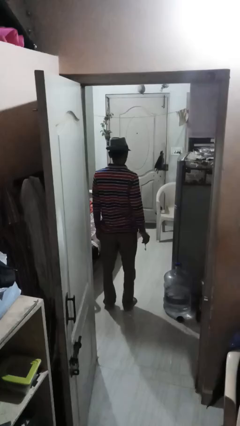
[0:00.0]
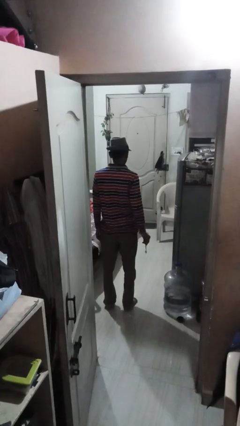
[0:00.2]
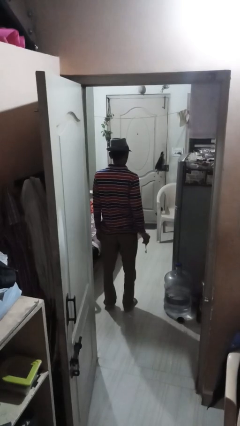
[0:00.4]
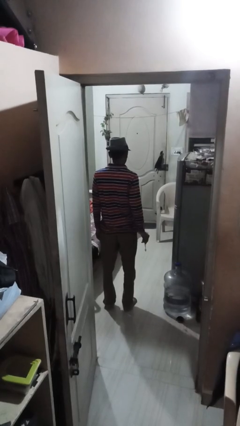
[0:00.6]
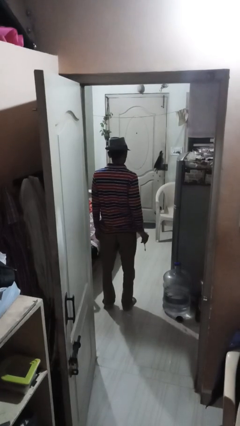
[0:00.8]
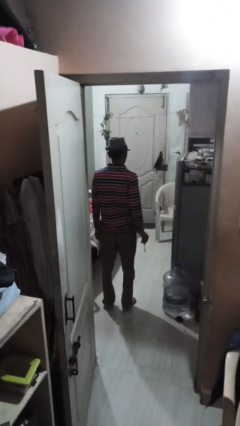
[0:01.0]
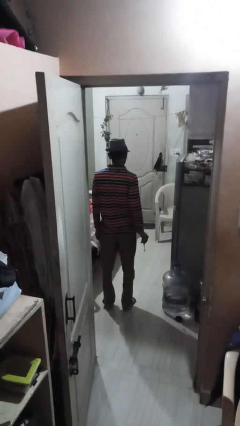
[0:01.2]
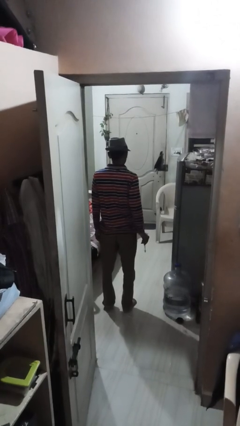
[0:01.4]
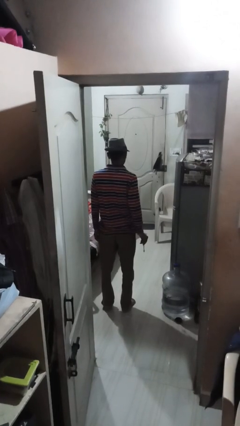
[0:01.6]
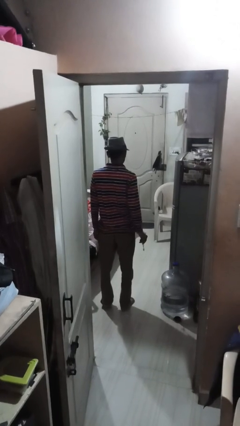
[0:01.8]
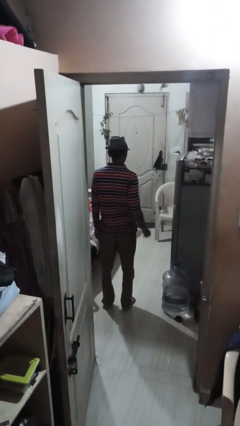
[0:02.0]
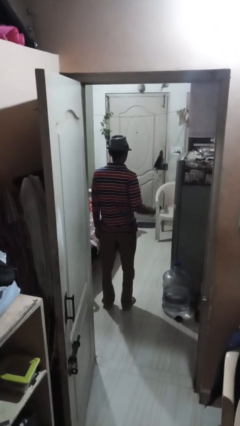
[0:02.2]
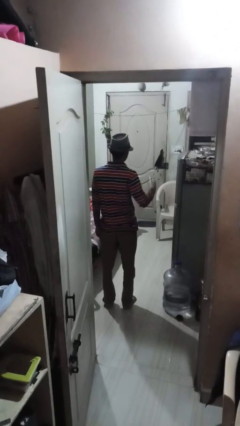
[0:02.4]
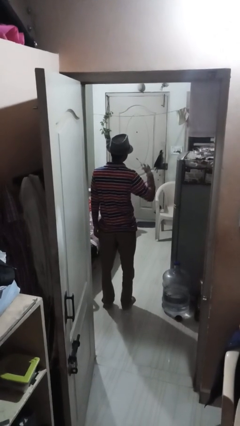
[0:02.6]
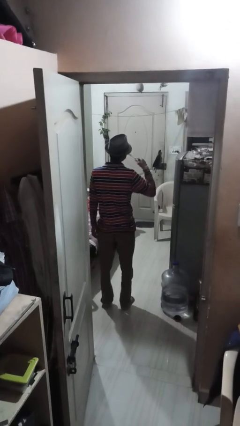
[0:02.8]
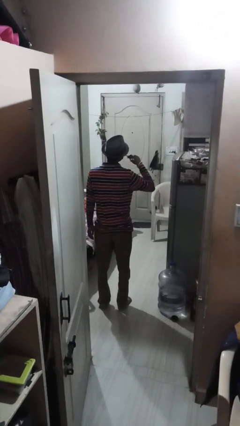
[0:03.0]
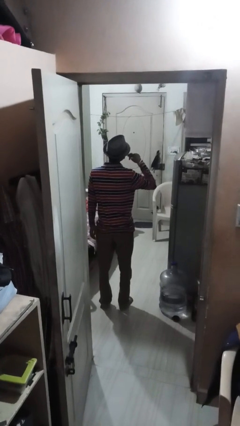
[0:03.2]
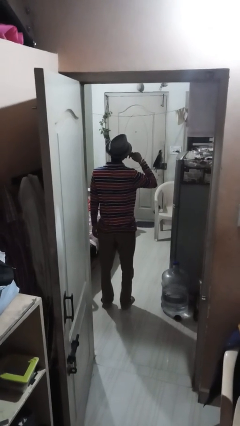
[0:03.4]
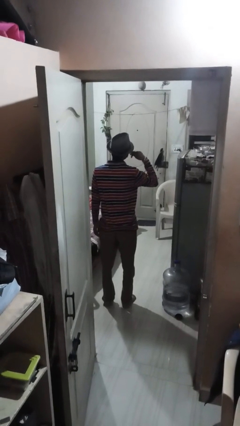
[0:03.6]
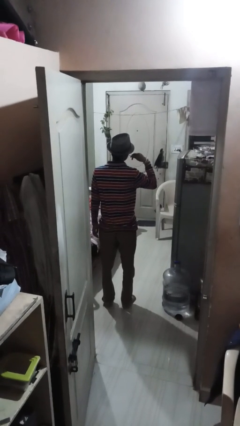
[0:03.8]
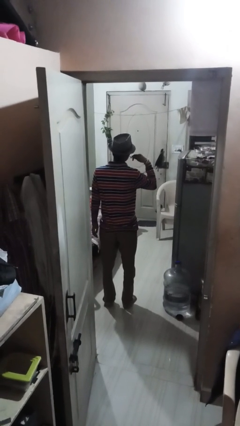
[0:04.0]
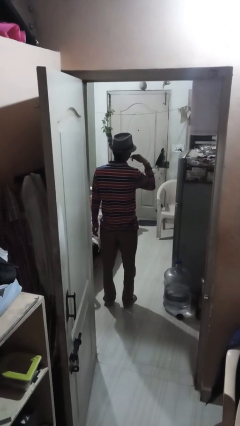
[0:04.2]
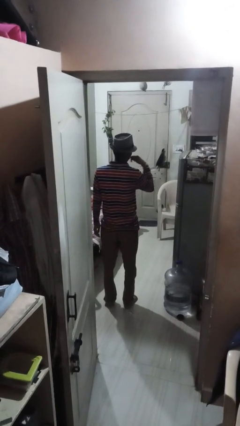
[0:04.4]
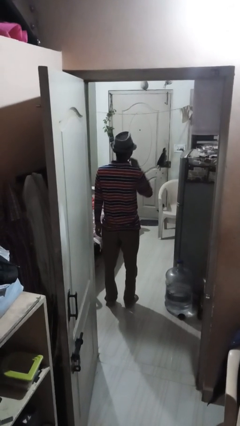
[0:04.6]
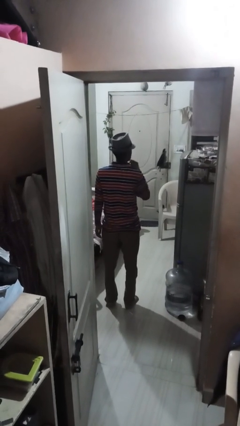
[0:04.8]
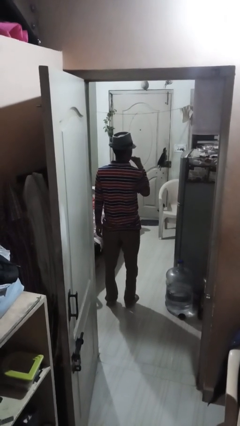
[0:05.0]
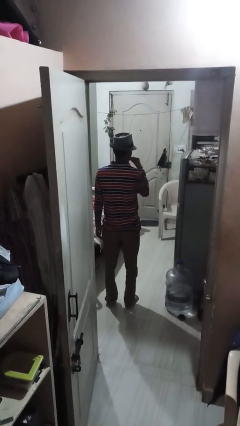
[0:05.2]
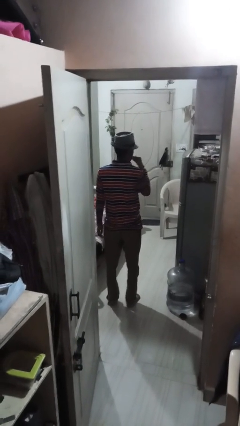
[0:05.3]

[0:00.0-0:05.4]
person brushes teeth

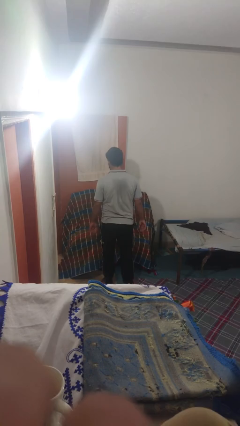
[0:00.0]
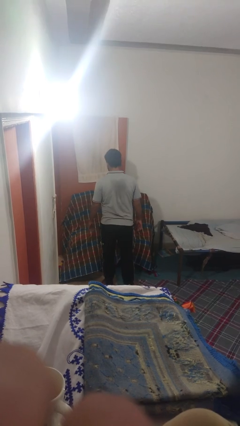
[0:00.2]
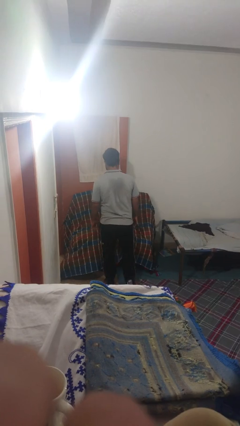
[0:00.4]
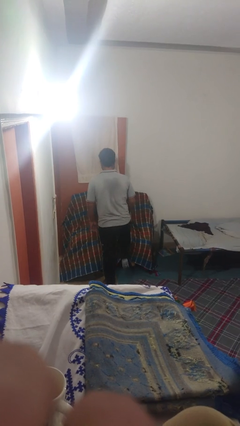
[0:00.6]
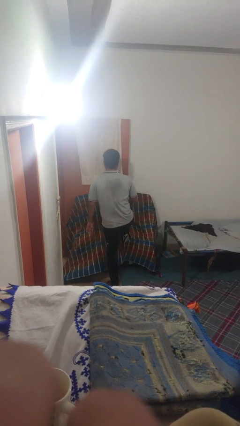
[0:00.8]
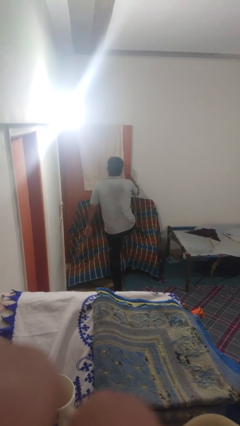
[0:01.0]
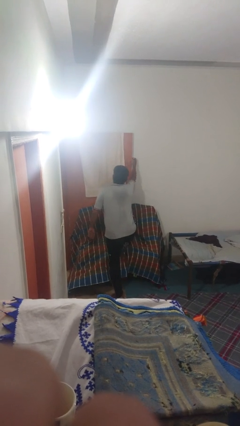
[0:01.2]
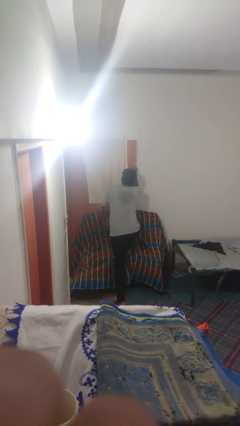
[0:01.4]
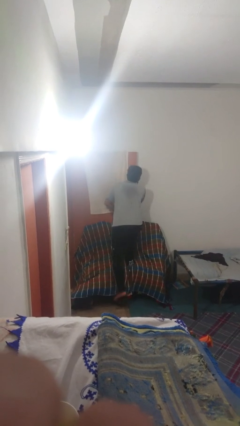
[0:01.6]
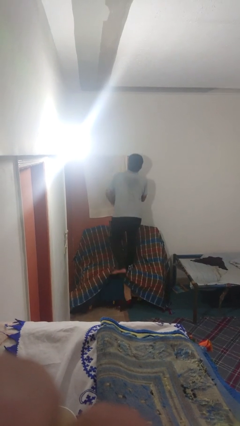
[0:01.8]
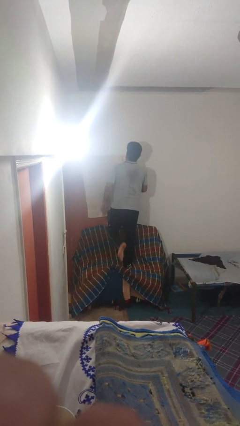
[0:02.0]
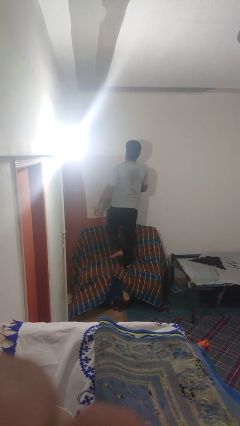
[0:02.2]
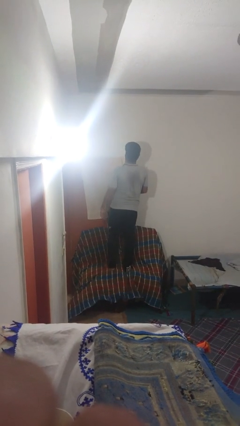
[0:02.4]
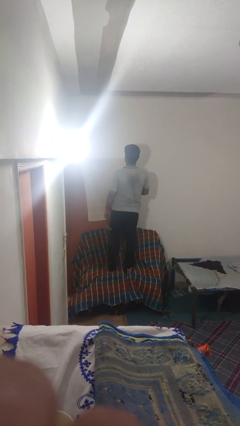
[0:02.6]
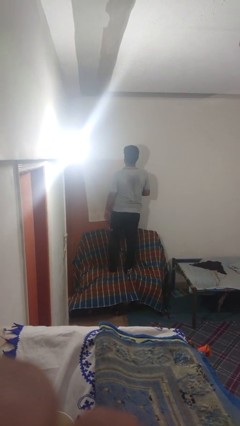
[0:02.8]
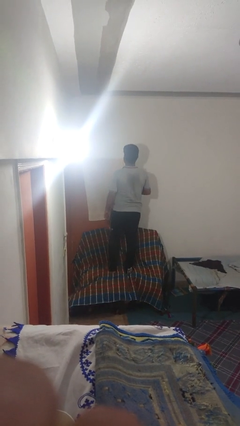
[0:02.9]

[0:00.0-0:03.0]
person climbs on couch

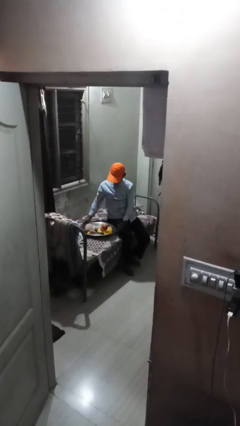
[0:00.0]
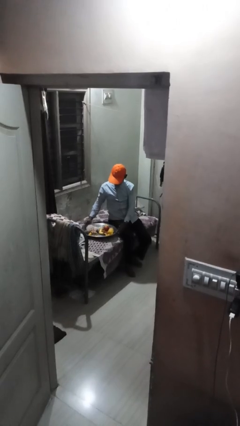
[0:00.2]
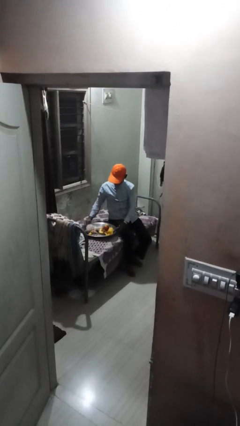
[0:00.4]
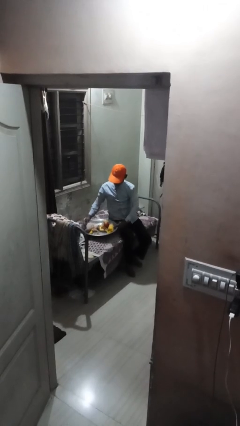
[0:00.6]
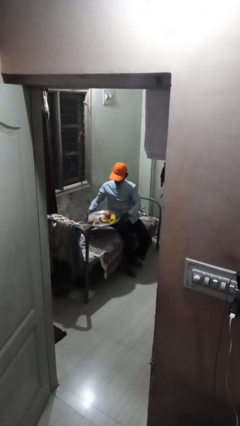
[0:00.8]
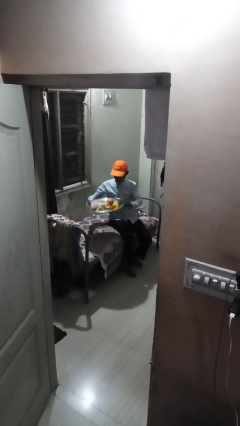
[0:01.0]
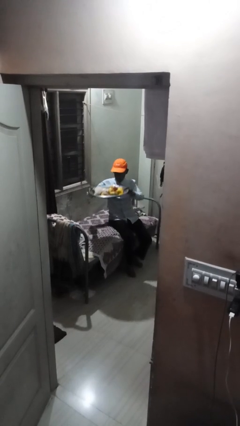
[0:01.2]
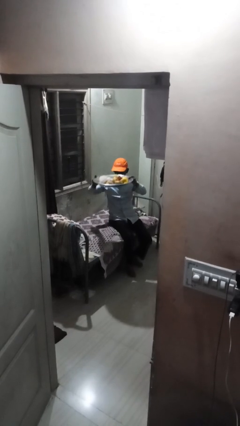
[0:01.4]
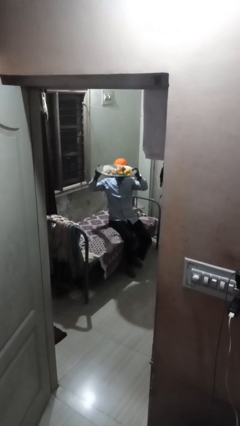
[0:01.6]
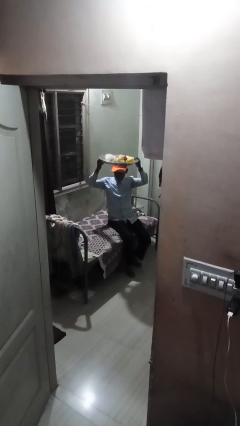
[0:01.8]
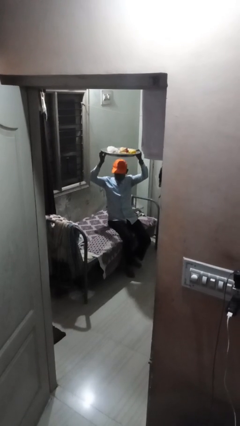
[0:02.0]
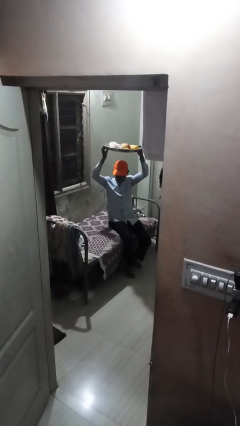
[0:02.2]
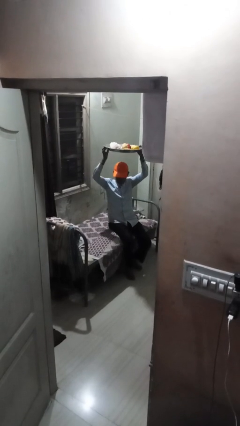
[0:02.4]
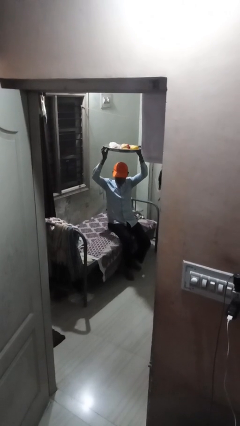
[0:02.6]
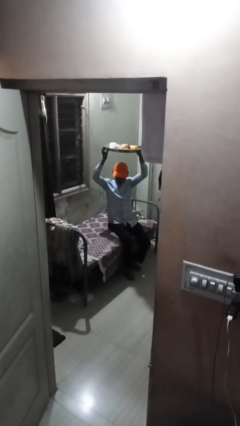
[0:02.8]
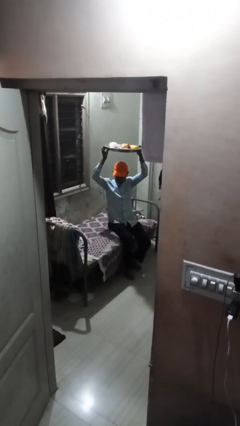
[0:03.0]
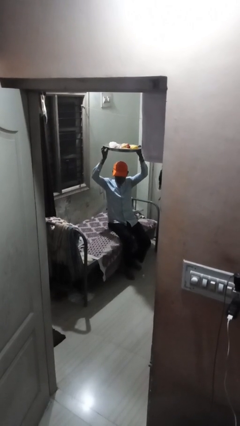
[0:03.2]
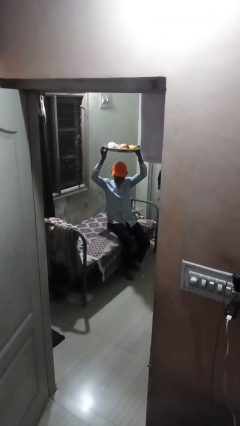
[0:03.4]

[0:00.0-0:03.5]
person holds object above head

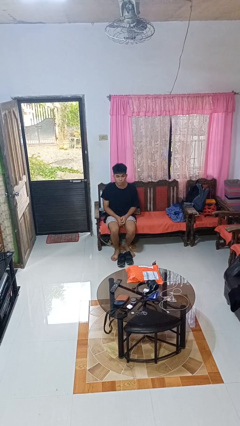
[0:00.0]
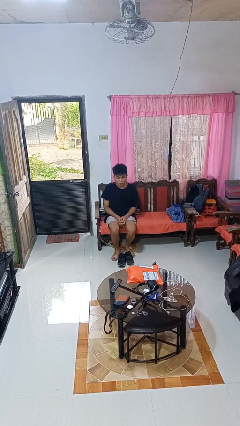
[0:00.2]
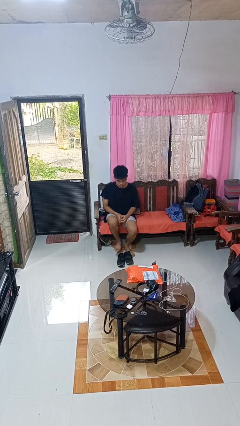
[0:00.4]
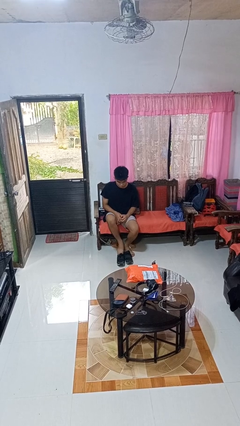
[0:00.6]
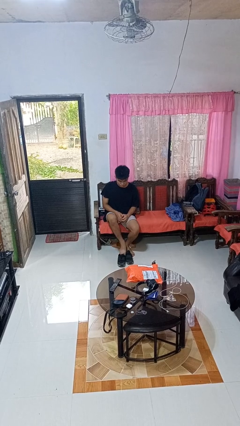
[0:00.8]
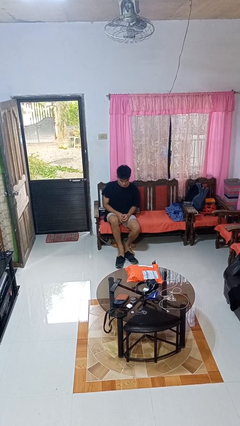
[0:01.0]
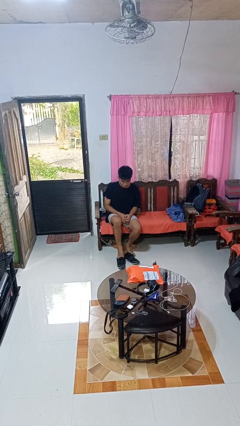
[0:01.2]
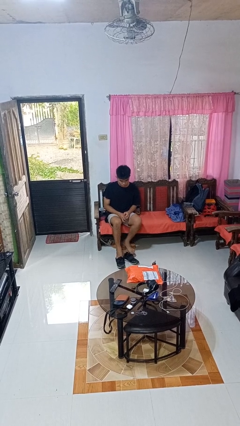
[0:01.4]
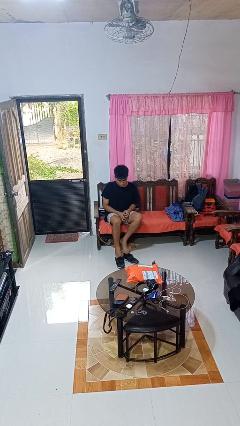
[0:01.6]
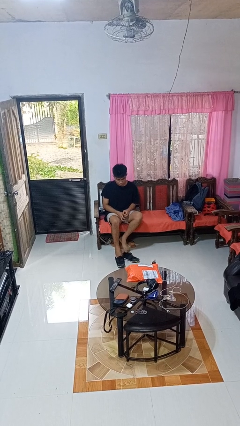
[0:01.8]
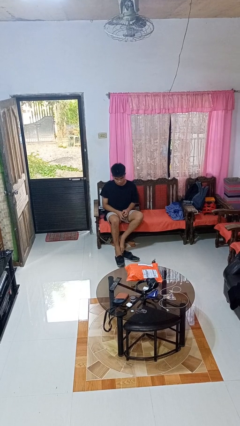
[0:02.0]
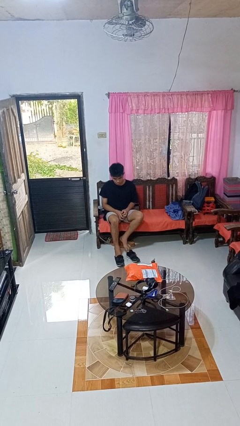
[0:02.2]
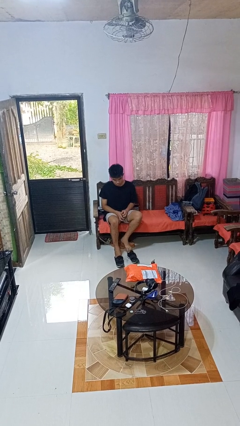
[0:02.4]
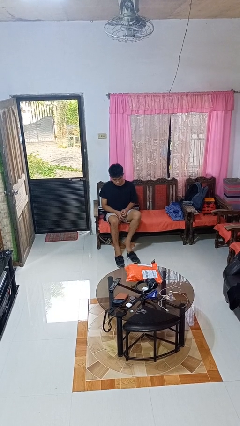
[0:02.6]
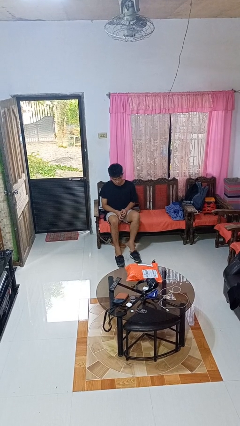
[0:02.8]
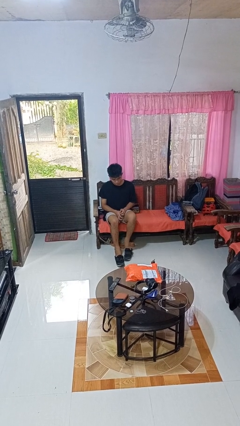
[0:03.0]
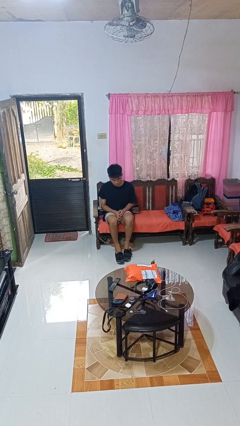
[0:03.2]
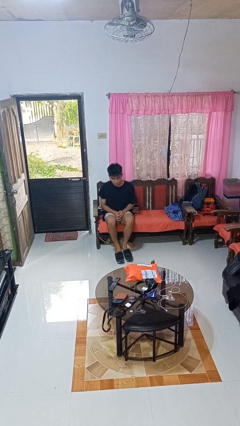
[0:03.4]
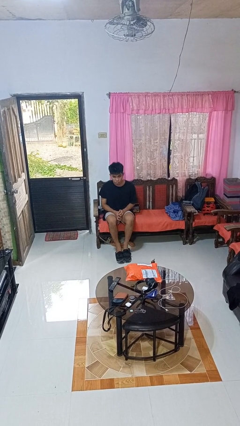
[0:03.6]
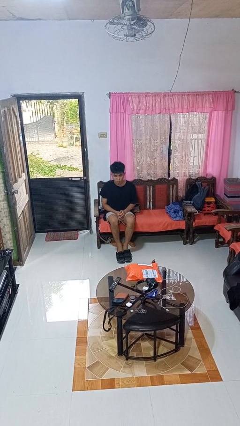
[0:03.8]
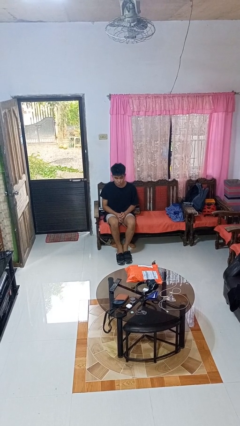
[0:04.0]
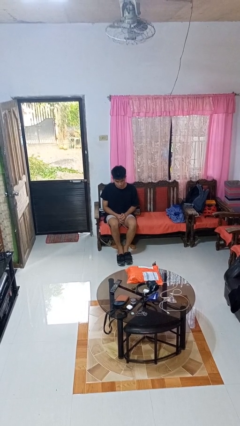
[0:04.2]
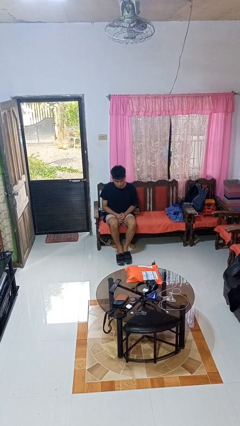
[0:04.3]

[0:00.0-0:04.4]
person puts on shoes

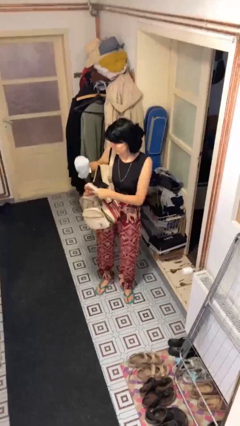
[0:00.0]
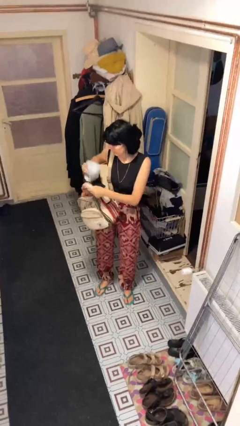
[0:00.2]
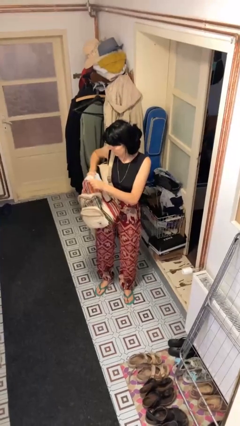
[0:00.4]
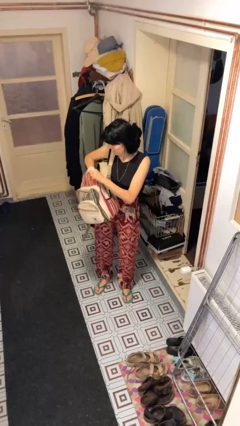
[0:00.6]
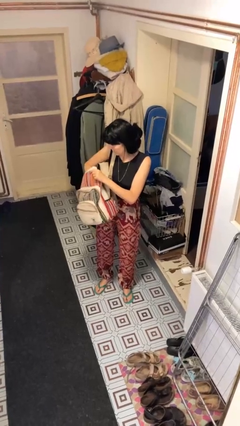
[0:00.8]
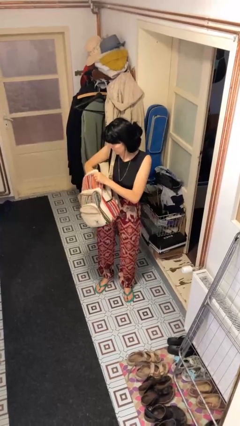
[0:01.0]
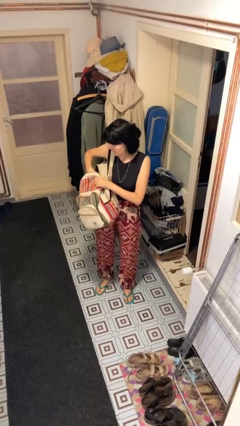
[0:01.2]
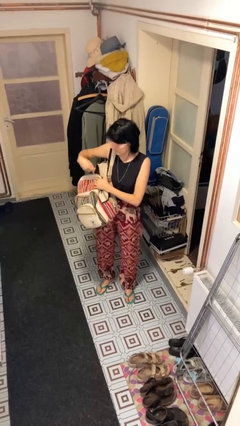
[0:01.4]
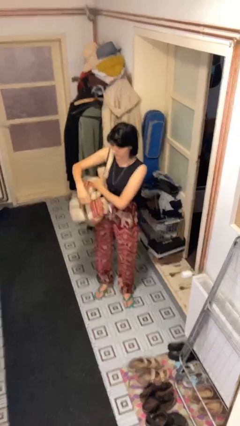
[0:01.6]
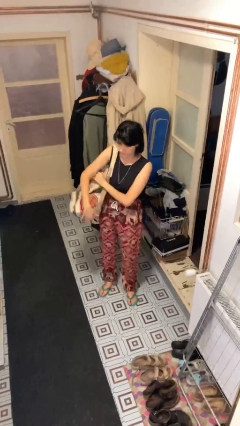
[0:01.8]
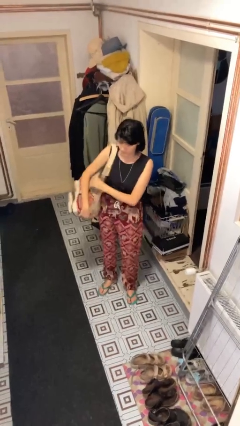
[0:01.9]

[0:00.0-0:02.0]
person puts object into backpack
